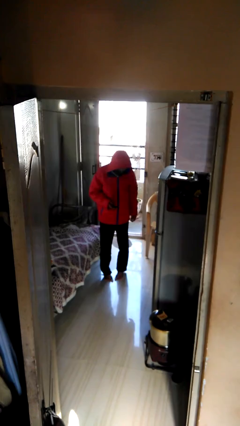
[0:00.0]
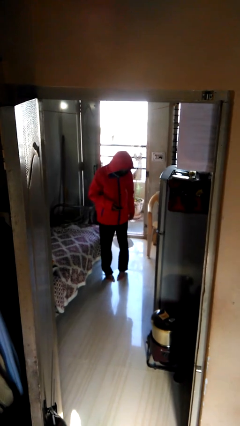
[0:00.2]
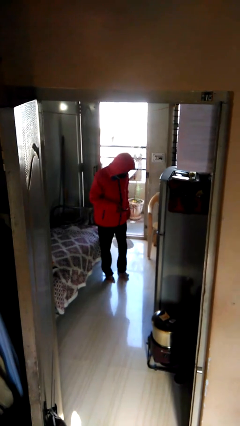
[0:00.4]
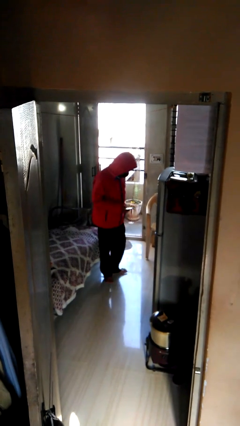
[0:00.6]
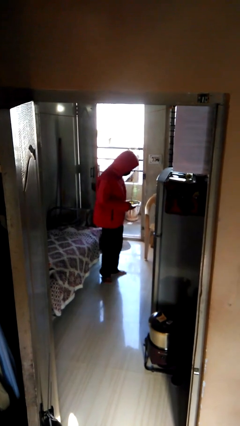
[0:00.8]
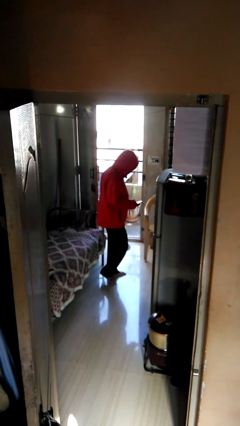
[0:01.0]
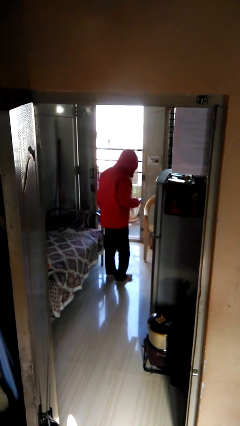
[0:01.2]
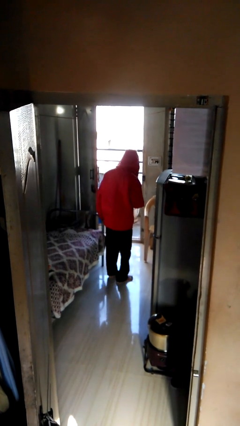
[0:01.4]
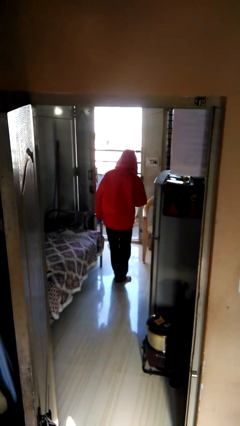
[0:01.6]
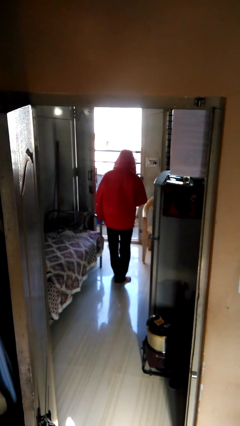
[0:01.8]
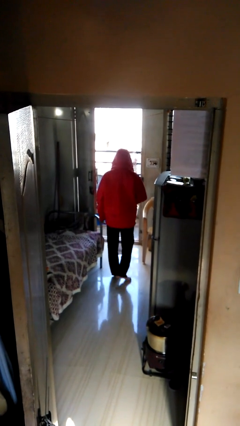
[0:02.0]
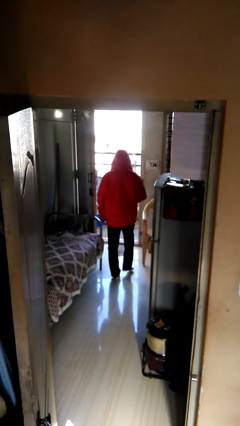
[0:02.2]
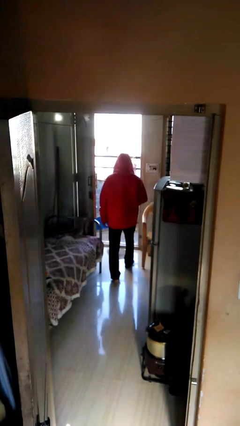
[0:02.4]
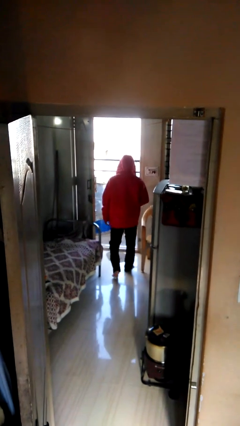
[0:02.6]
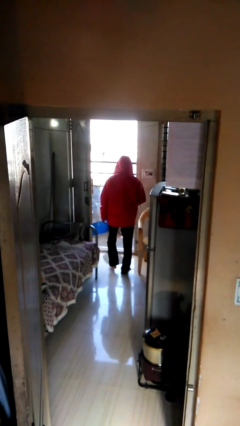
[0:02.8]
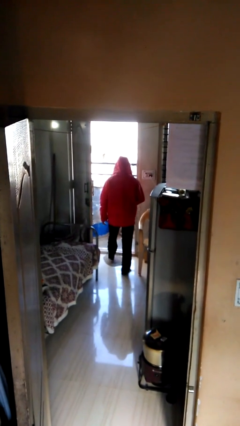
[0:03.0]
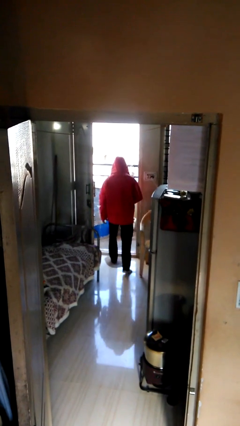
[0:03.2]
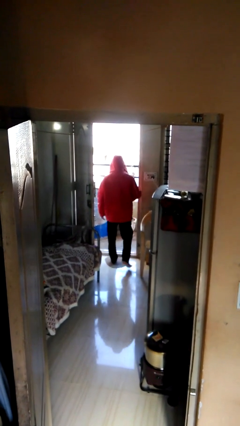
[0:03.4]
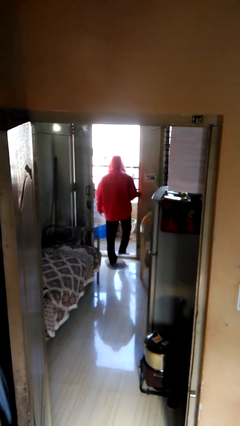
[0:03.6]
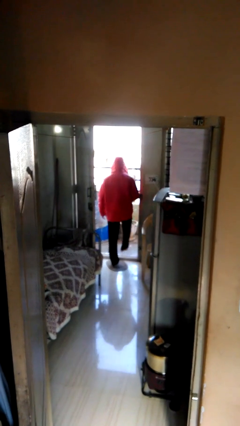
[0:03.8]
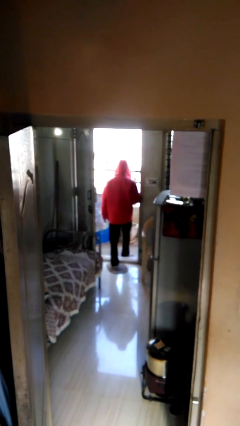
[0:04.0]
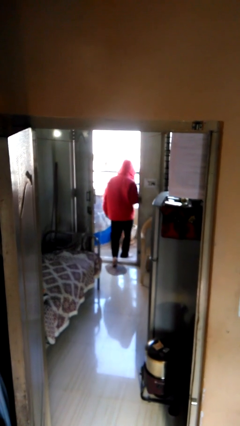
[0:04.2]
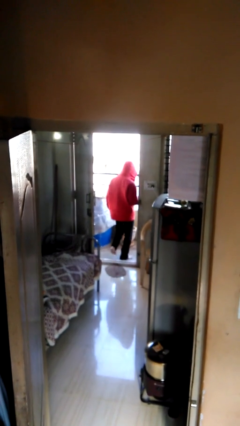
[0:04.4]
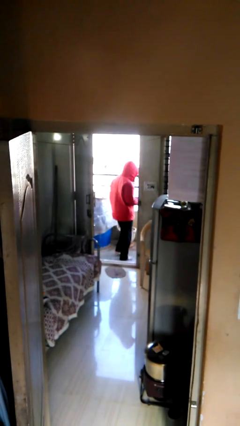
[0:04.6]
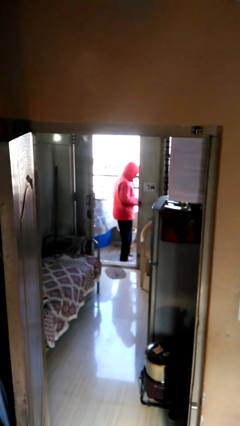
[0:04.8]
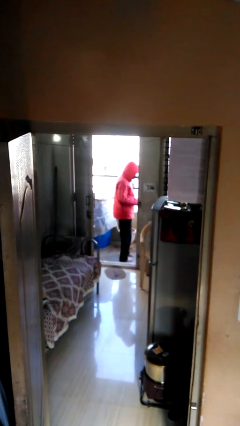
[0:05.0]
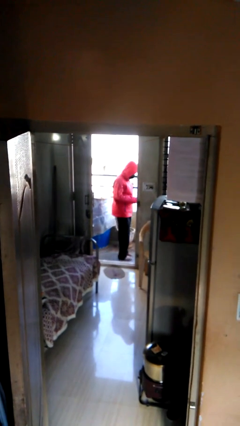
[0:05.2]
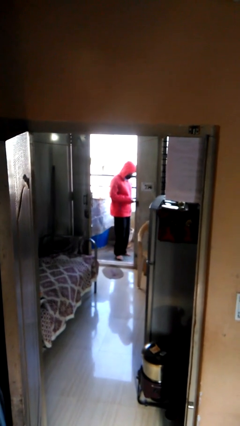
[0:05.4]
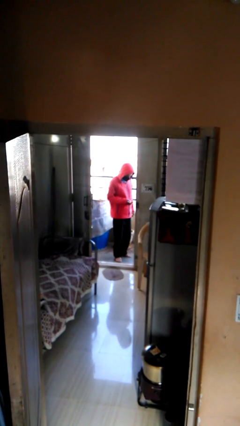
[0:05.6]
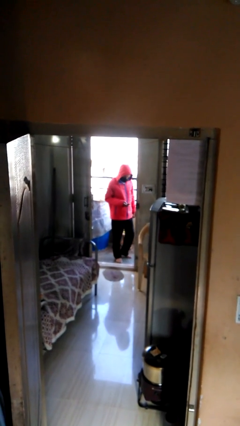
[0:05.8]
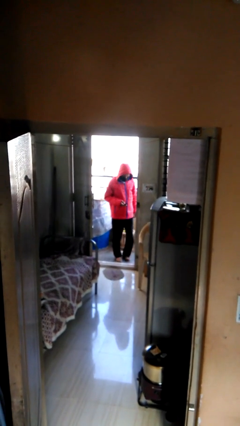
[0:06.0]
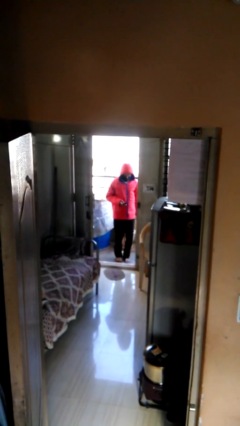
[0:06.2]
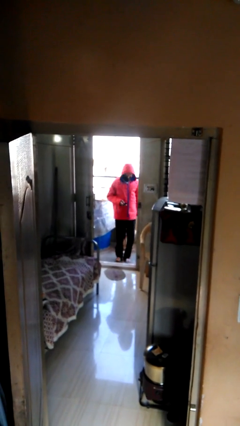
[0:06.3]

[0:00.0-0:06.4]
person exits scene through structure

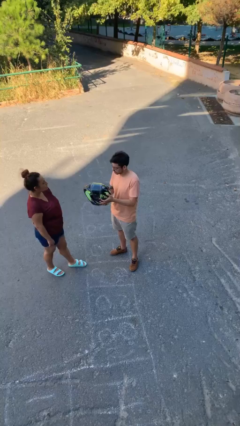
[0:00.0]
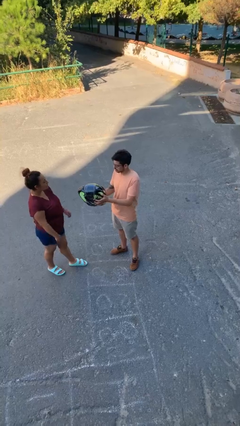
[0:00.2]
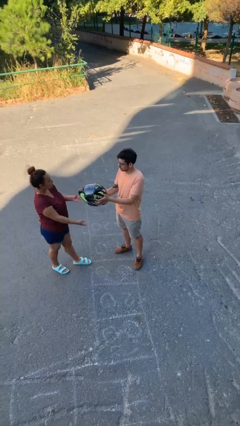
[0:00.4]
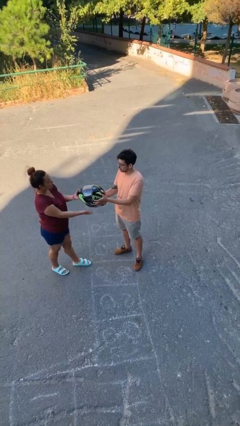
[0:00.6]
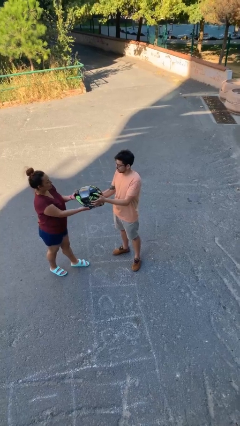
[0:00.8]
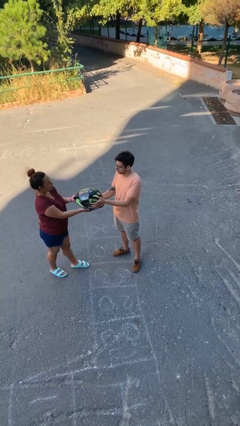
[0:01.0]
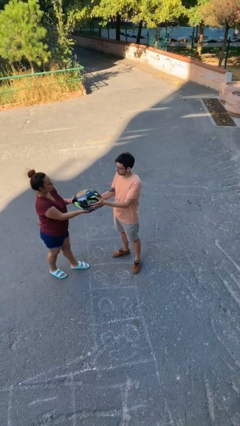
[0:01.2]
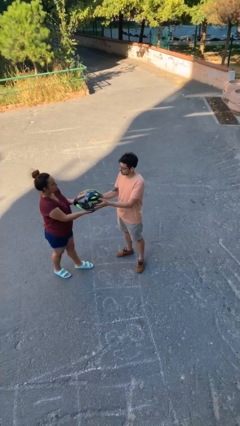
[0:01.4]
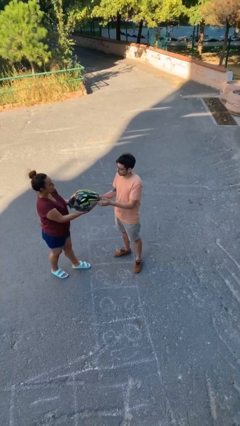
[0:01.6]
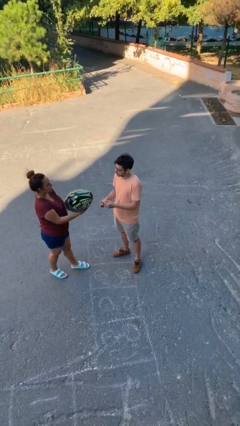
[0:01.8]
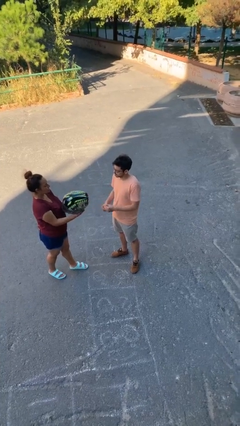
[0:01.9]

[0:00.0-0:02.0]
person transfers object to person

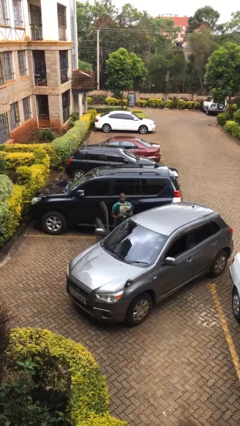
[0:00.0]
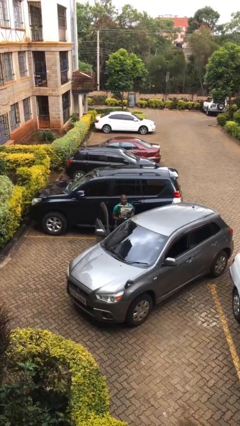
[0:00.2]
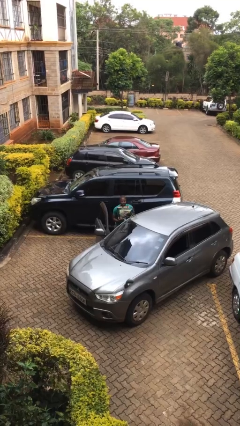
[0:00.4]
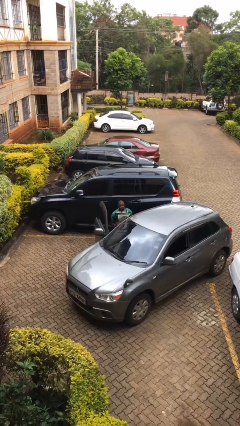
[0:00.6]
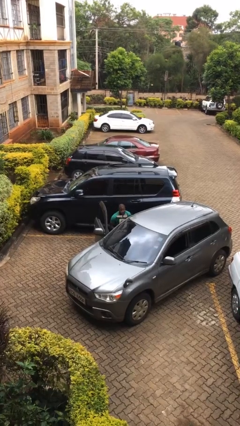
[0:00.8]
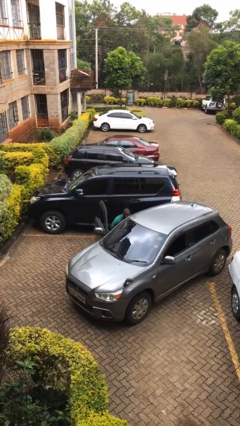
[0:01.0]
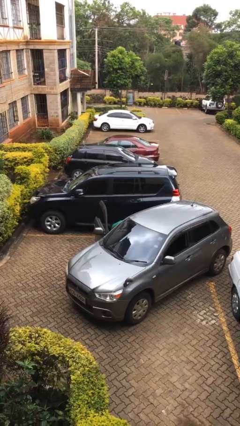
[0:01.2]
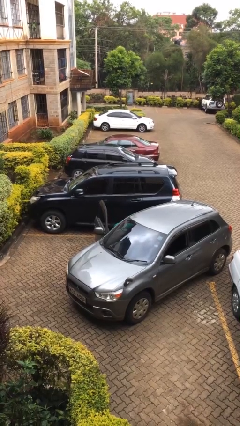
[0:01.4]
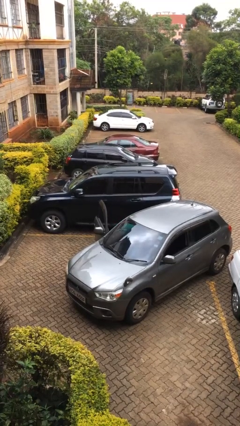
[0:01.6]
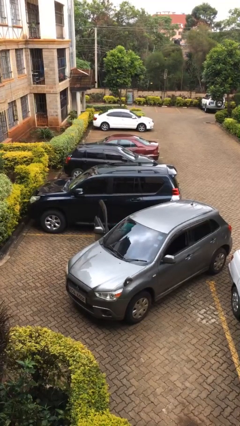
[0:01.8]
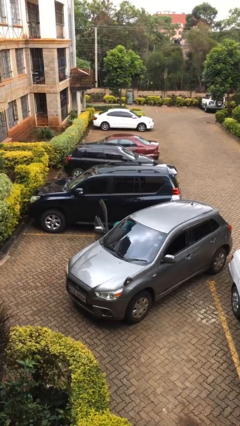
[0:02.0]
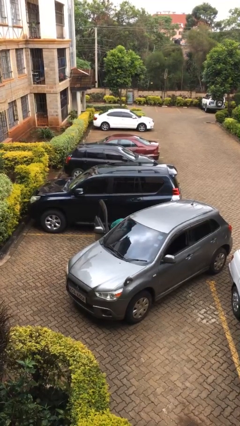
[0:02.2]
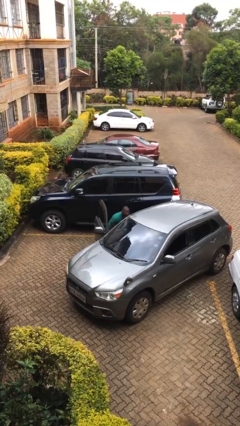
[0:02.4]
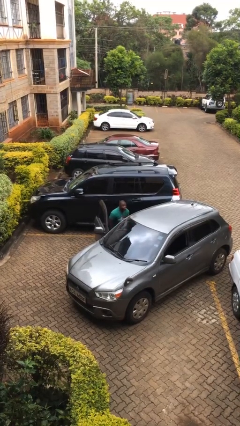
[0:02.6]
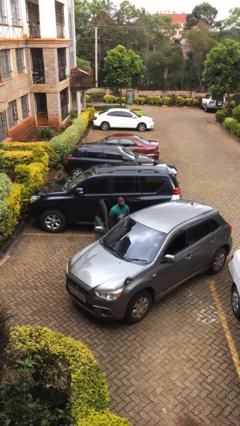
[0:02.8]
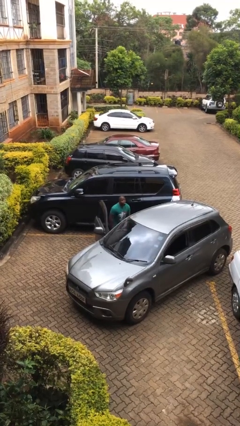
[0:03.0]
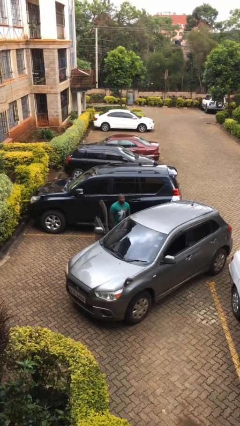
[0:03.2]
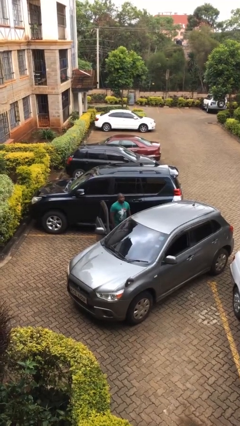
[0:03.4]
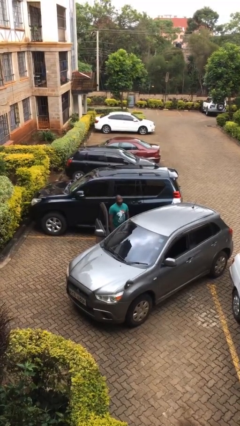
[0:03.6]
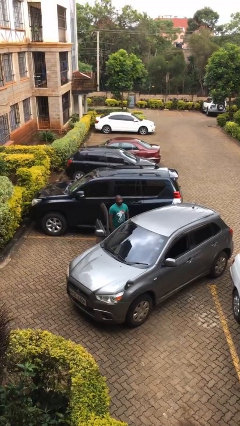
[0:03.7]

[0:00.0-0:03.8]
person loads car

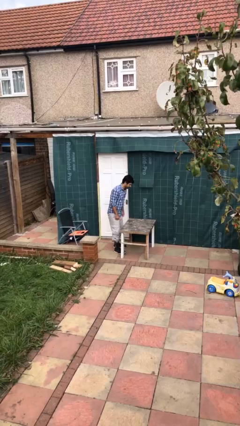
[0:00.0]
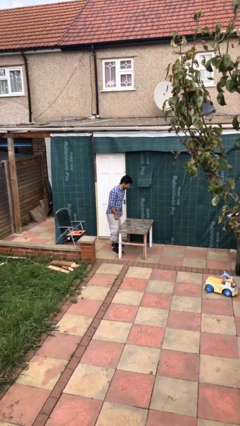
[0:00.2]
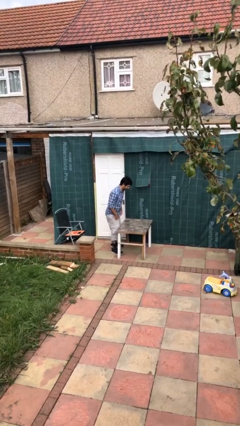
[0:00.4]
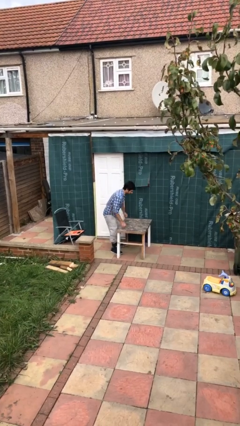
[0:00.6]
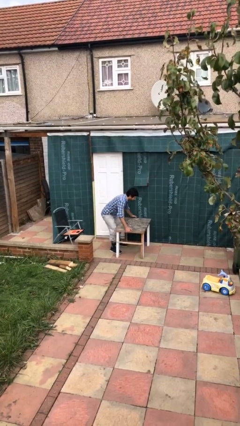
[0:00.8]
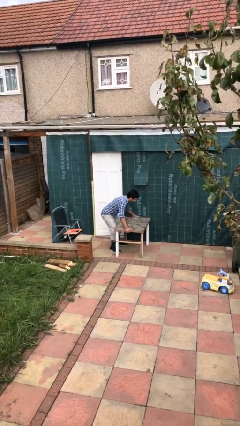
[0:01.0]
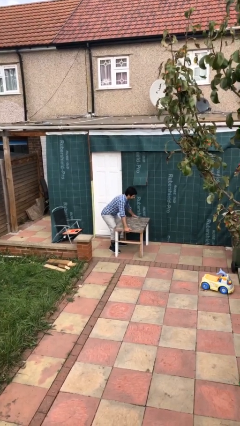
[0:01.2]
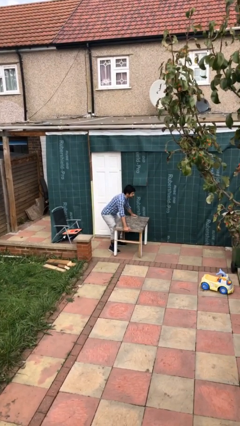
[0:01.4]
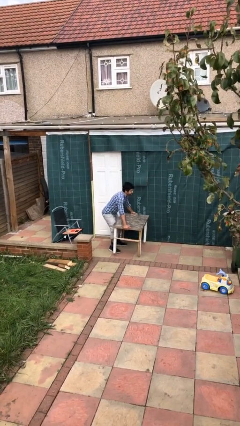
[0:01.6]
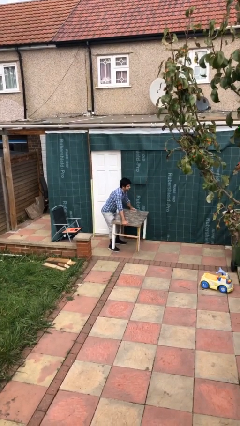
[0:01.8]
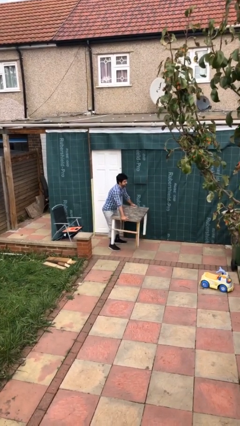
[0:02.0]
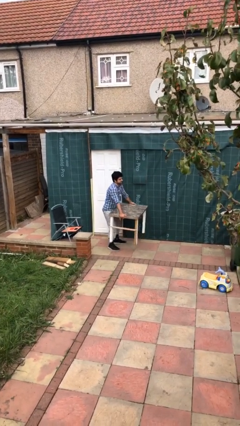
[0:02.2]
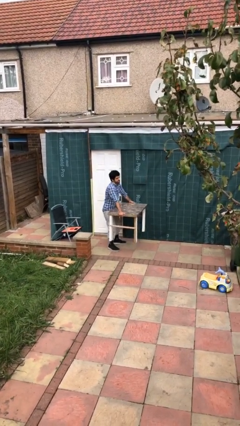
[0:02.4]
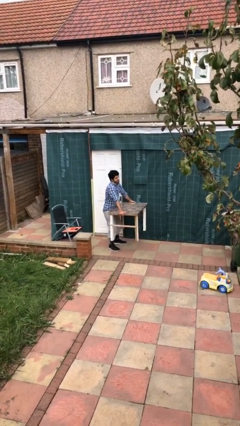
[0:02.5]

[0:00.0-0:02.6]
person picks up object from floor

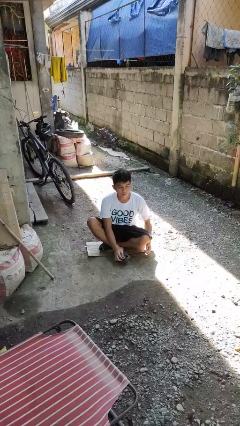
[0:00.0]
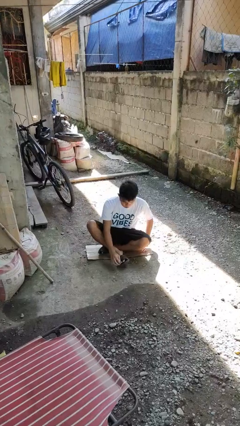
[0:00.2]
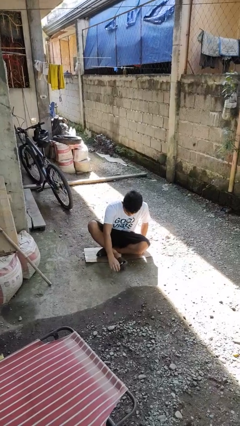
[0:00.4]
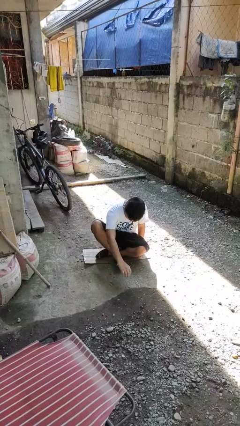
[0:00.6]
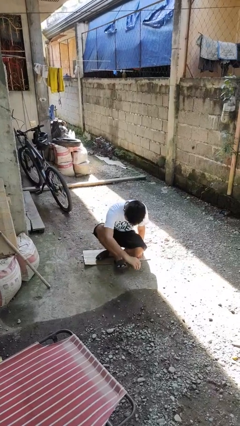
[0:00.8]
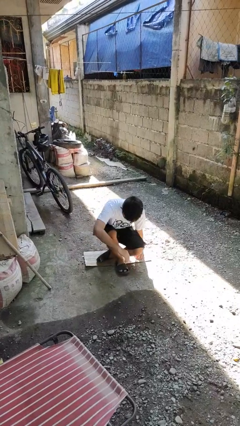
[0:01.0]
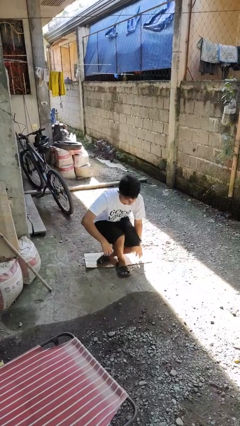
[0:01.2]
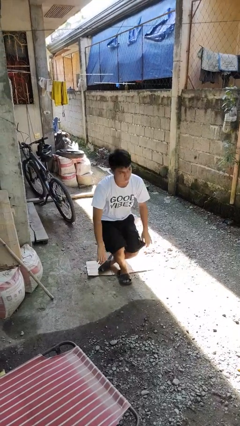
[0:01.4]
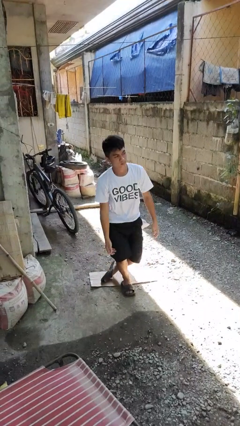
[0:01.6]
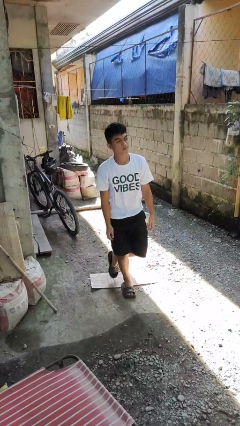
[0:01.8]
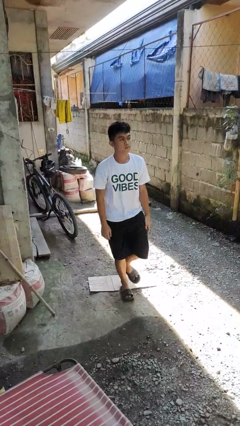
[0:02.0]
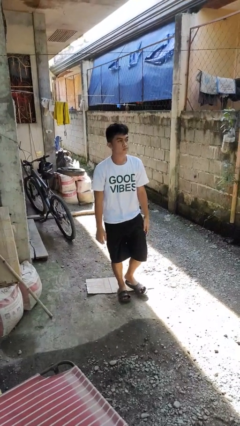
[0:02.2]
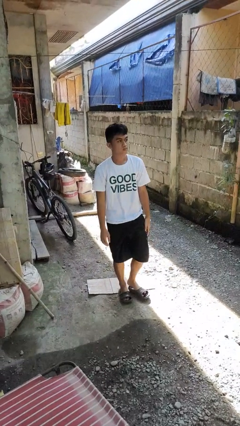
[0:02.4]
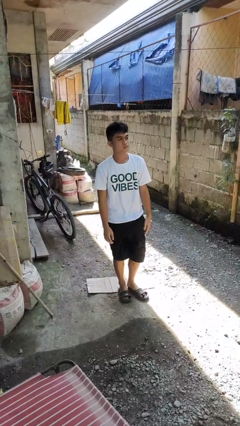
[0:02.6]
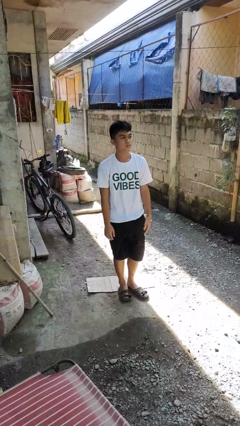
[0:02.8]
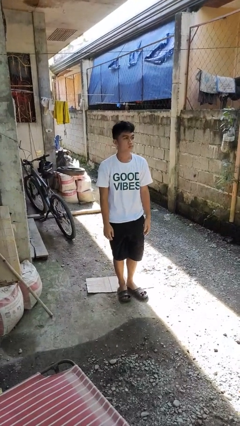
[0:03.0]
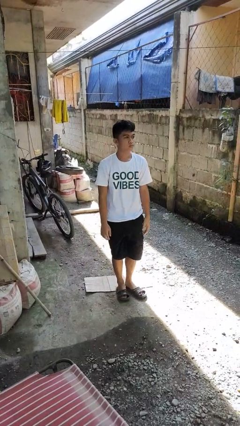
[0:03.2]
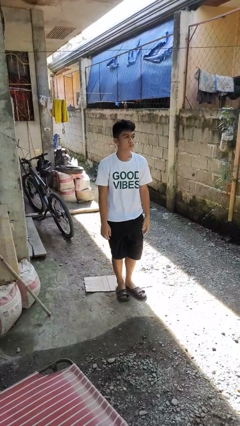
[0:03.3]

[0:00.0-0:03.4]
person stands up from floor
